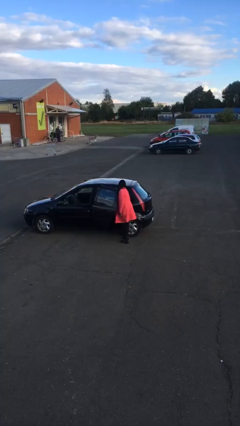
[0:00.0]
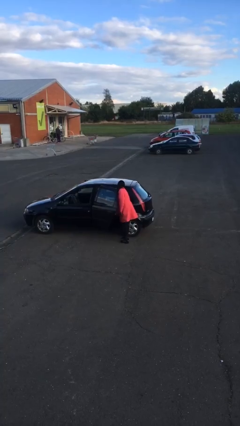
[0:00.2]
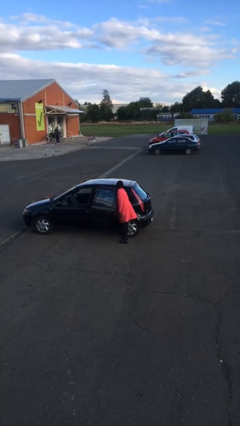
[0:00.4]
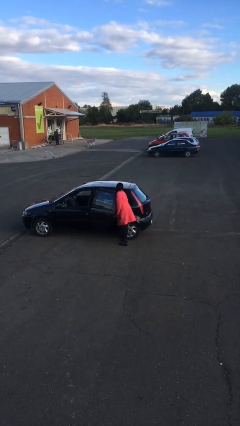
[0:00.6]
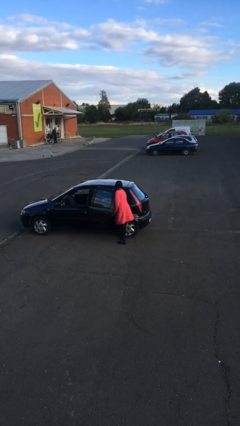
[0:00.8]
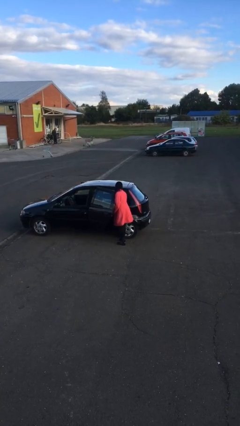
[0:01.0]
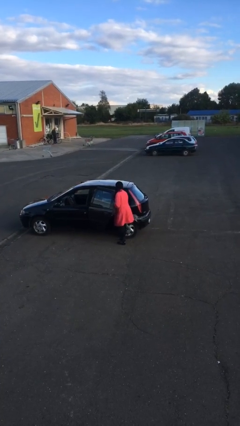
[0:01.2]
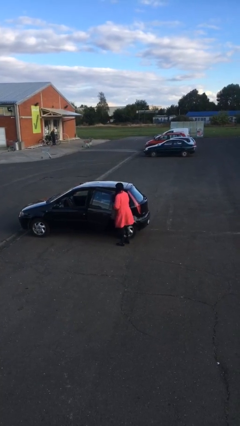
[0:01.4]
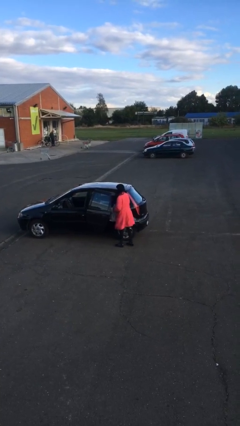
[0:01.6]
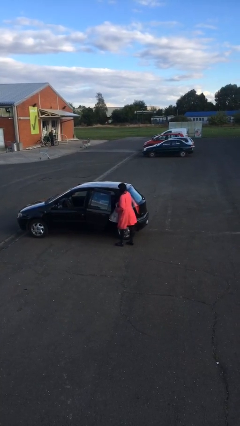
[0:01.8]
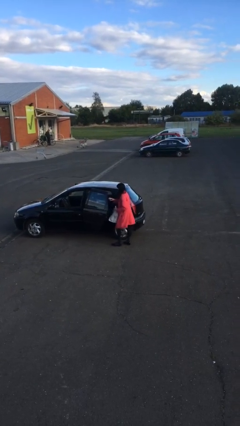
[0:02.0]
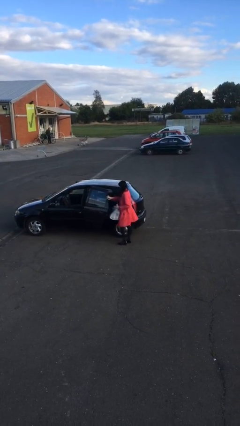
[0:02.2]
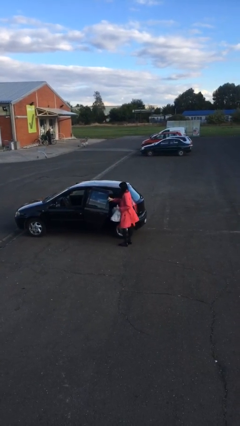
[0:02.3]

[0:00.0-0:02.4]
person unloads car

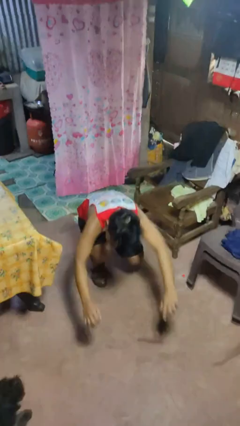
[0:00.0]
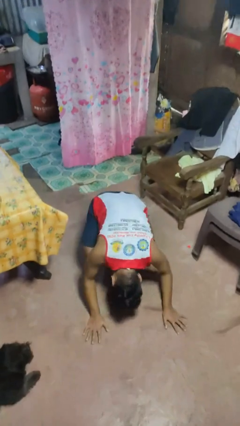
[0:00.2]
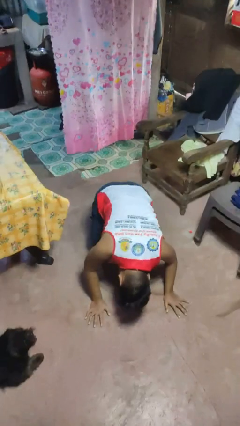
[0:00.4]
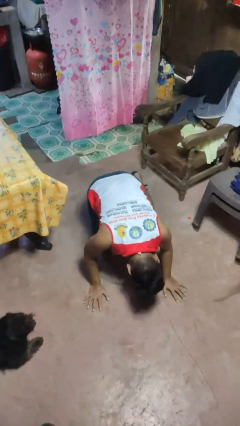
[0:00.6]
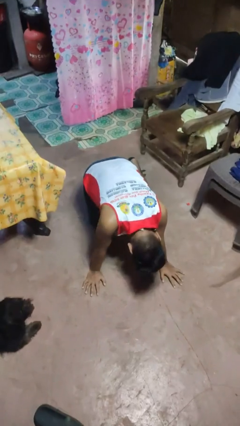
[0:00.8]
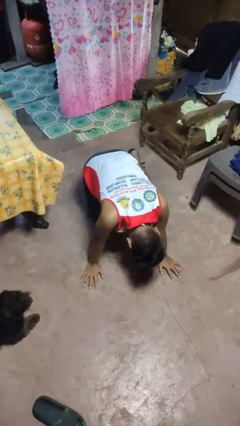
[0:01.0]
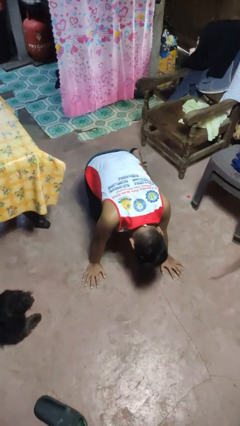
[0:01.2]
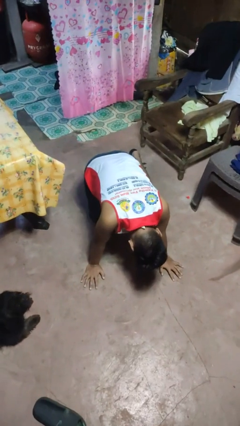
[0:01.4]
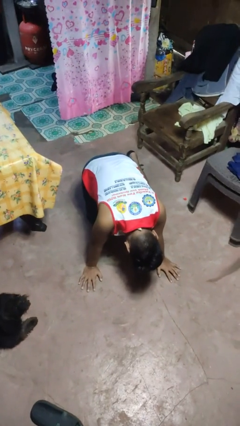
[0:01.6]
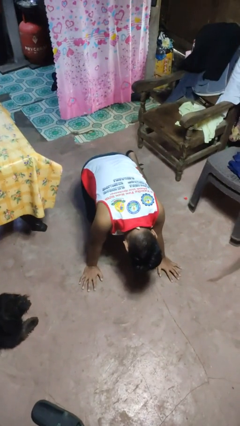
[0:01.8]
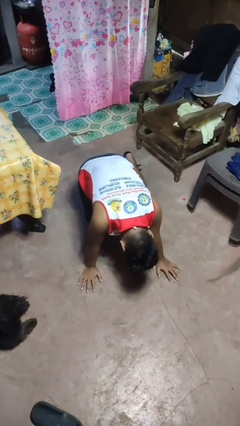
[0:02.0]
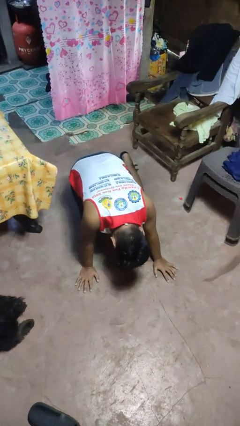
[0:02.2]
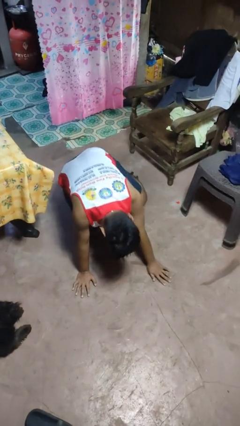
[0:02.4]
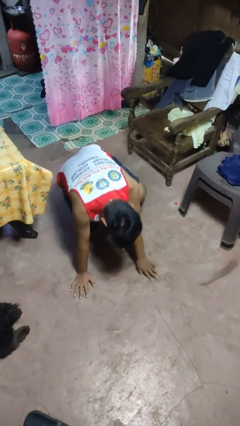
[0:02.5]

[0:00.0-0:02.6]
person lies down on floor

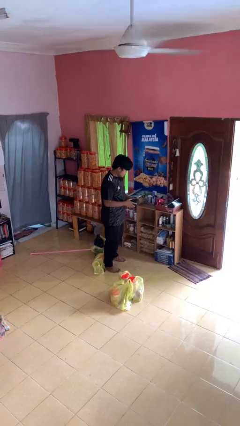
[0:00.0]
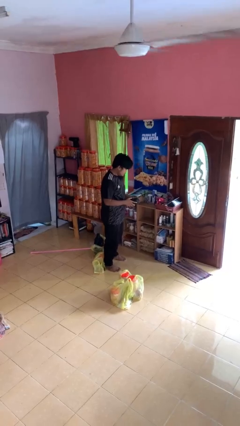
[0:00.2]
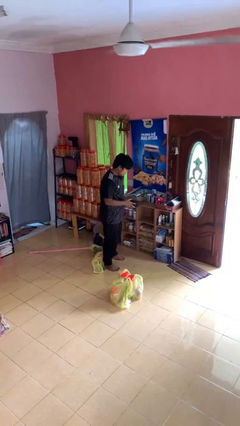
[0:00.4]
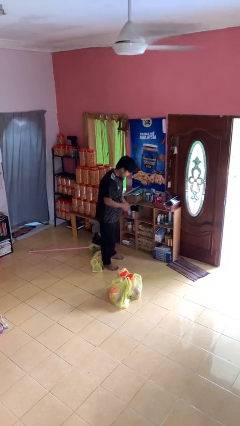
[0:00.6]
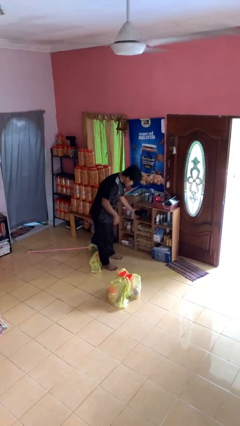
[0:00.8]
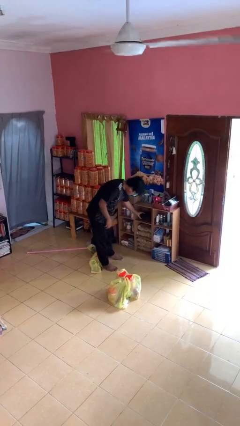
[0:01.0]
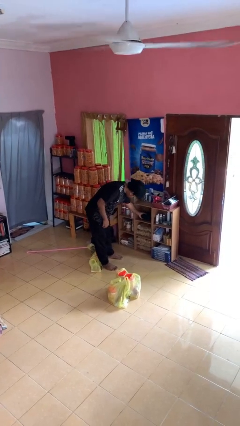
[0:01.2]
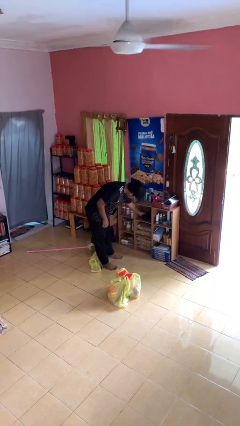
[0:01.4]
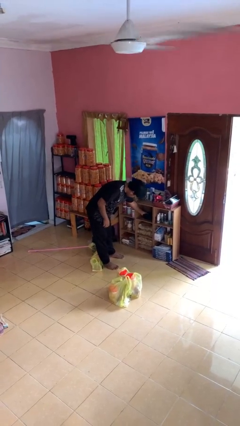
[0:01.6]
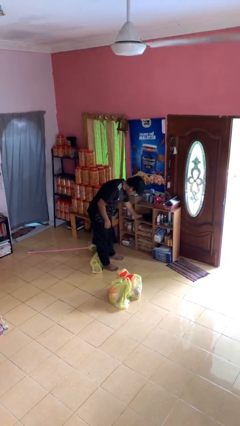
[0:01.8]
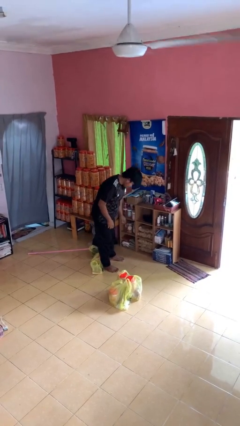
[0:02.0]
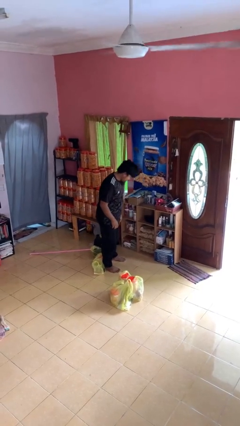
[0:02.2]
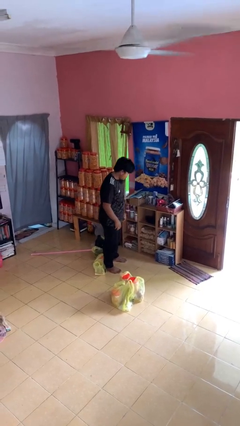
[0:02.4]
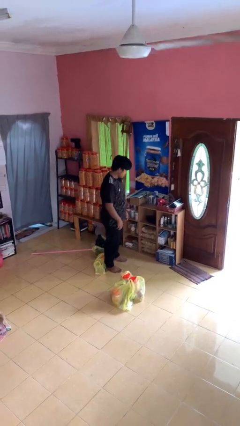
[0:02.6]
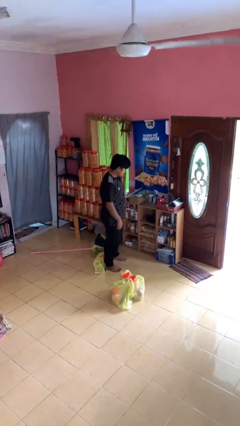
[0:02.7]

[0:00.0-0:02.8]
person puts object in cabinet

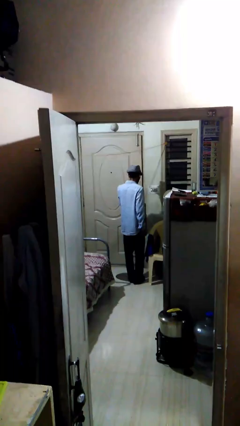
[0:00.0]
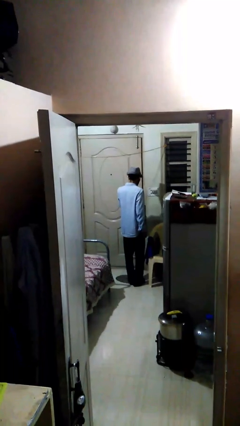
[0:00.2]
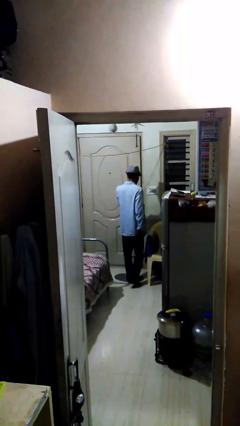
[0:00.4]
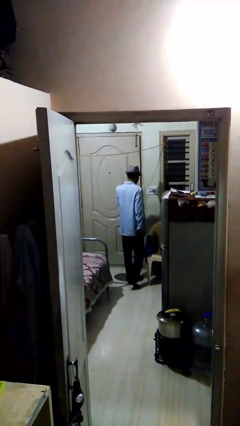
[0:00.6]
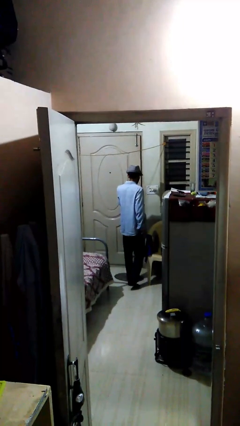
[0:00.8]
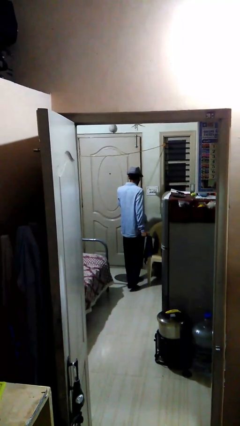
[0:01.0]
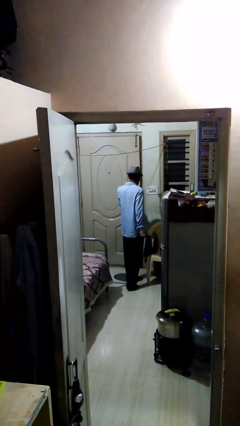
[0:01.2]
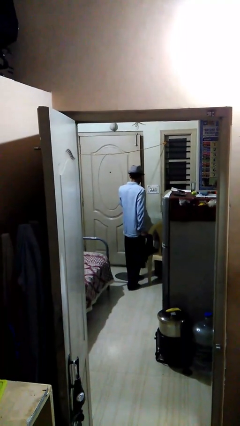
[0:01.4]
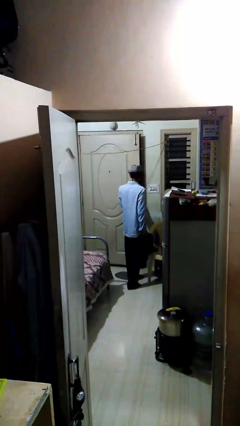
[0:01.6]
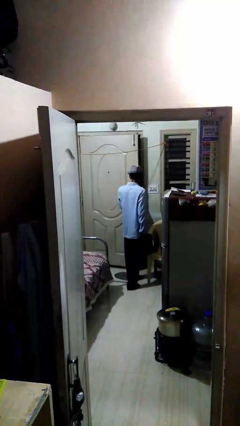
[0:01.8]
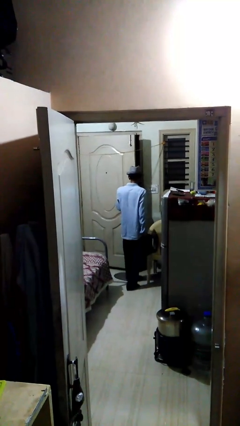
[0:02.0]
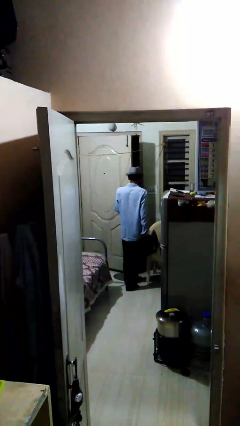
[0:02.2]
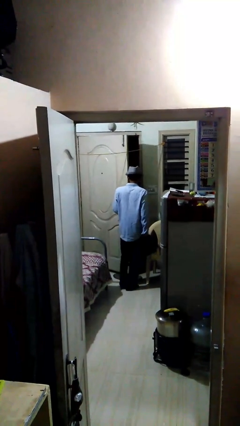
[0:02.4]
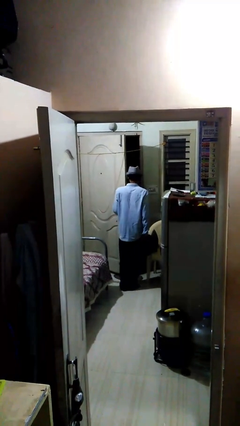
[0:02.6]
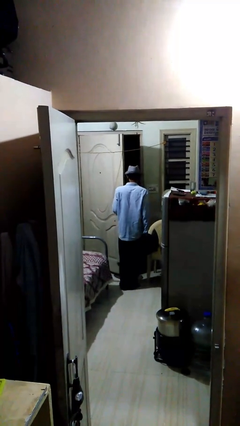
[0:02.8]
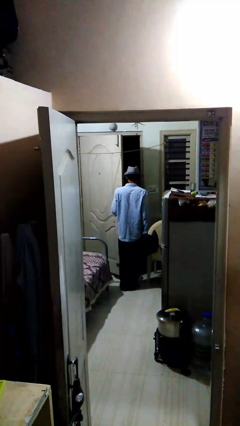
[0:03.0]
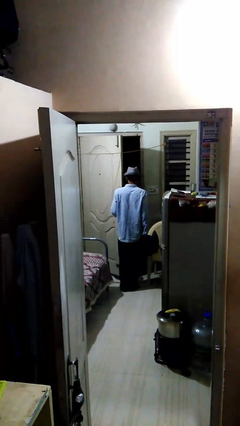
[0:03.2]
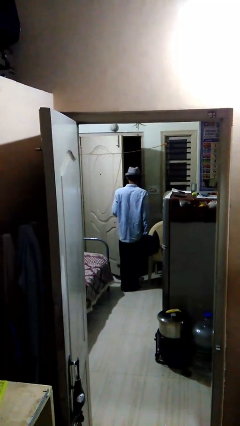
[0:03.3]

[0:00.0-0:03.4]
person opens facility door

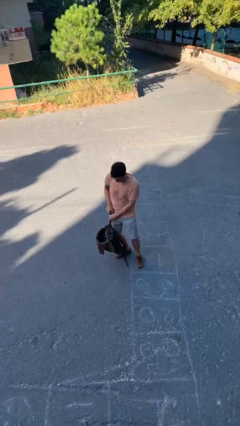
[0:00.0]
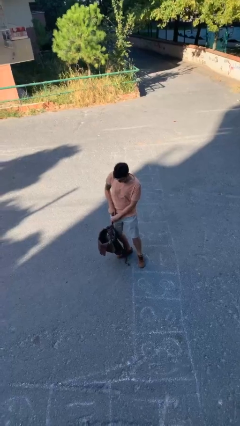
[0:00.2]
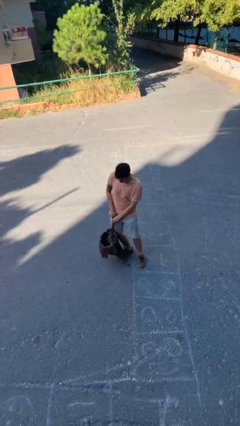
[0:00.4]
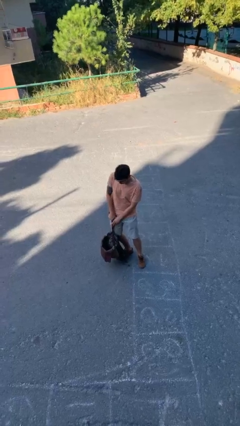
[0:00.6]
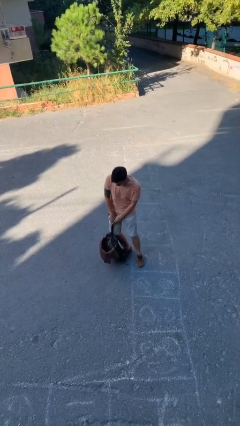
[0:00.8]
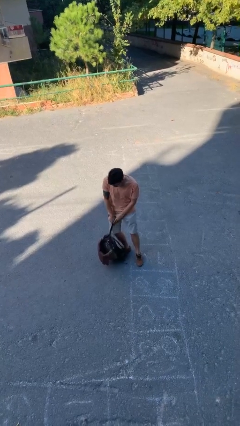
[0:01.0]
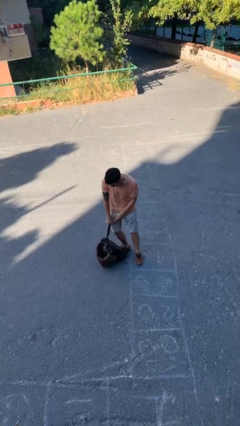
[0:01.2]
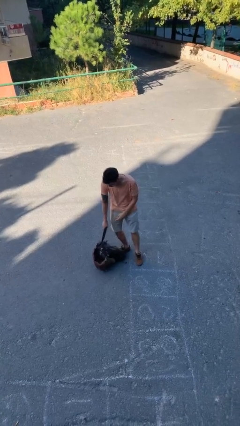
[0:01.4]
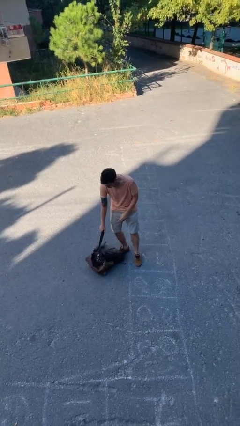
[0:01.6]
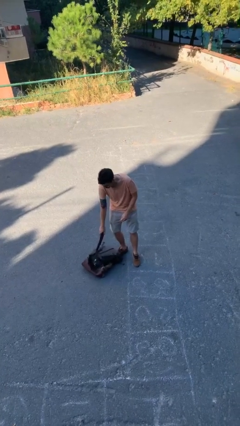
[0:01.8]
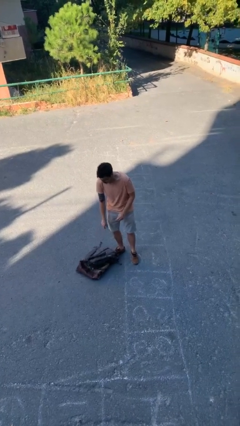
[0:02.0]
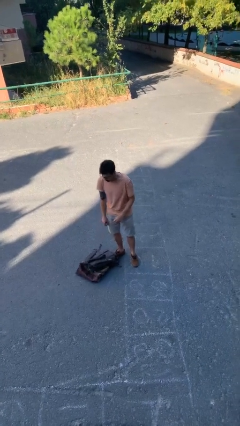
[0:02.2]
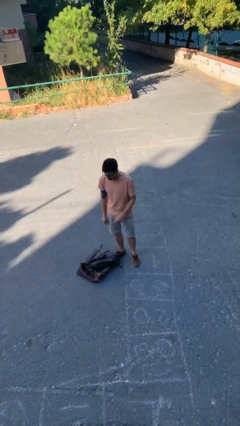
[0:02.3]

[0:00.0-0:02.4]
person puts down object on floor

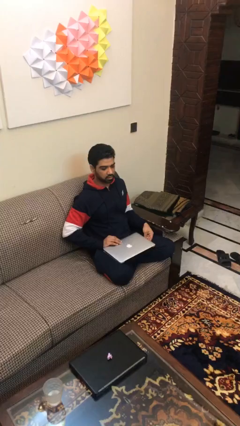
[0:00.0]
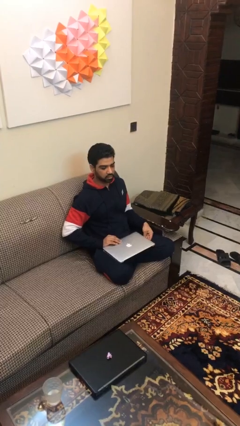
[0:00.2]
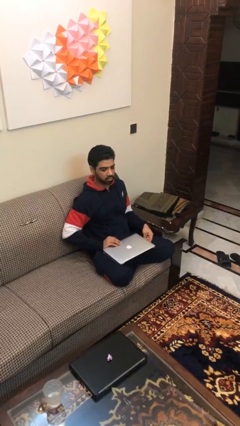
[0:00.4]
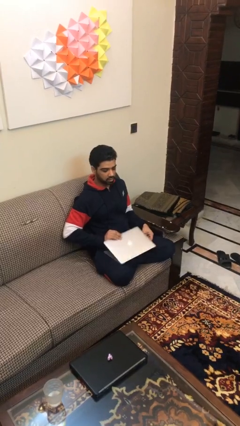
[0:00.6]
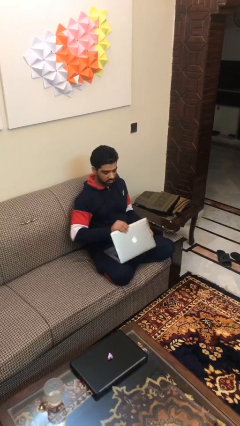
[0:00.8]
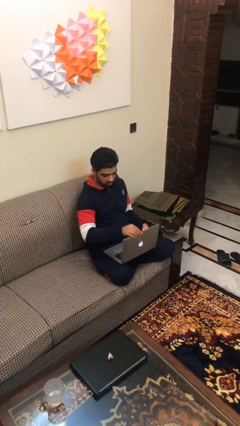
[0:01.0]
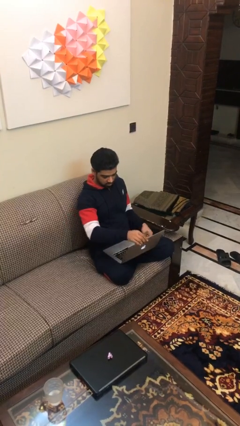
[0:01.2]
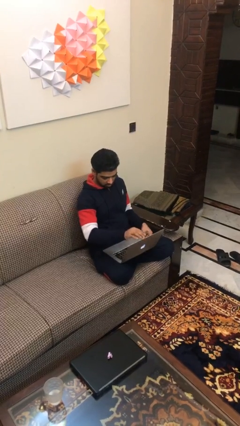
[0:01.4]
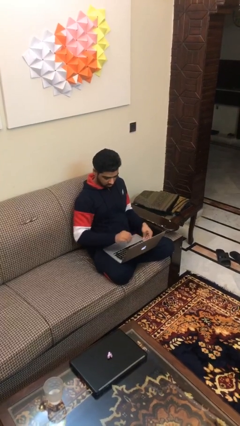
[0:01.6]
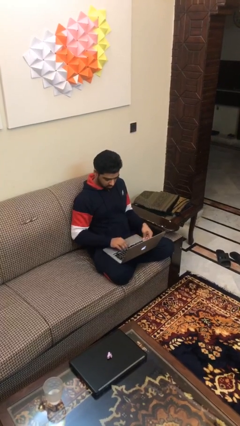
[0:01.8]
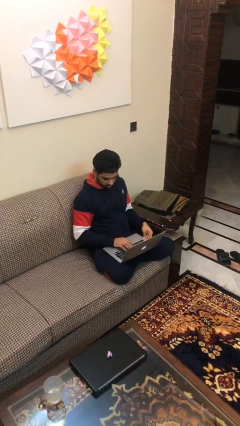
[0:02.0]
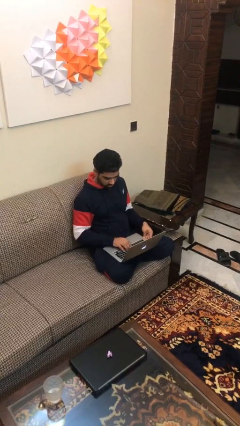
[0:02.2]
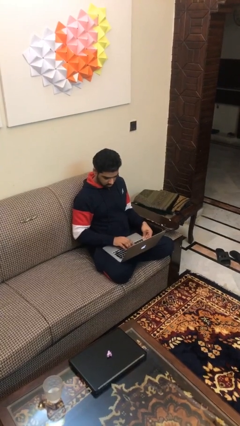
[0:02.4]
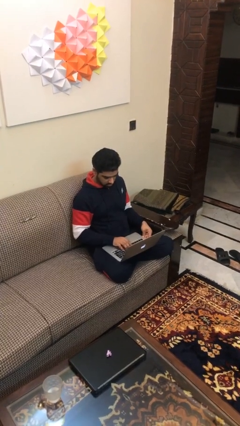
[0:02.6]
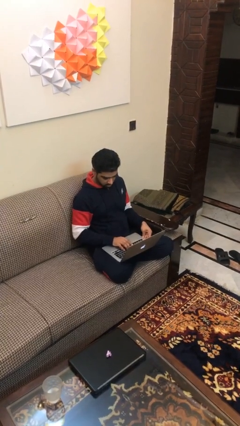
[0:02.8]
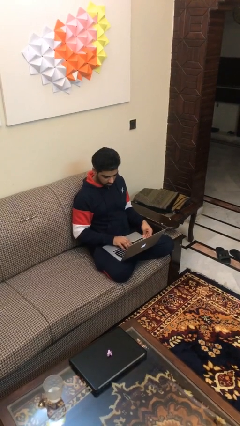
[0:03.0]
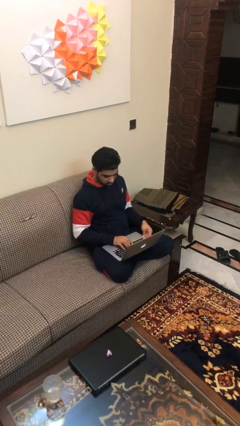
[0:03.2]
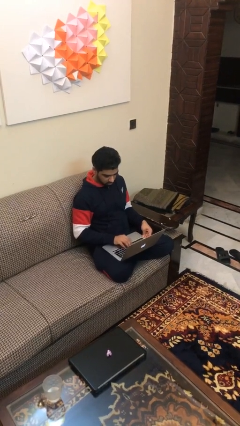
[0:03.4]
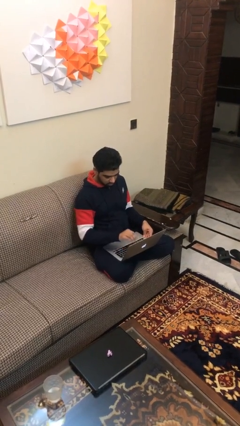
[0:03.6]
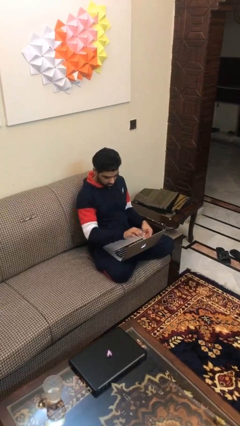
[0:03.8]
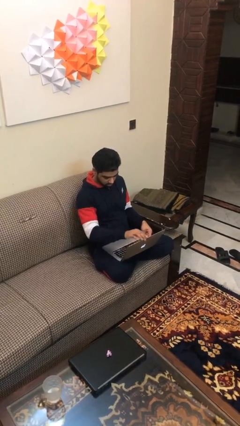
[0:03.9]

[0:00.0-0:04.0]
person interacts with laptop

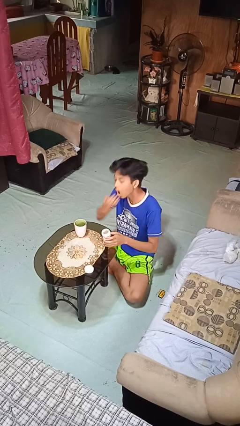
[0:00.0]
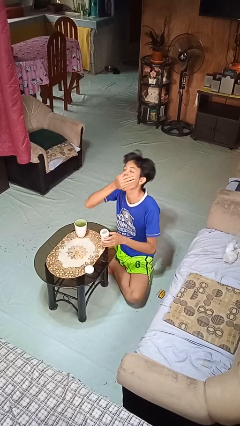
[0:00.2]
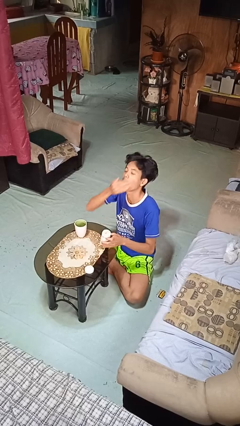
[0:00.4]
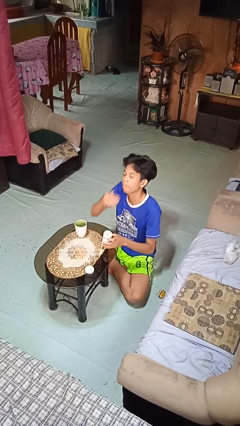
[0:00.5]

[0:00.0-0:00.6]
person takes medicine pills
